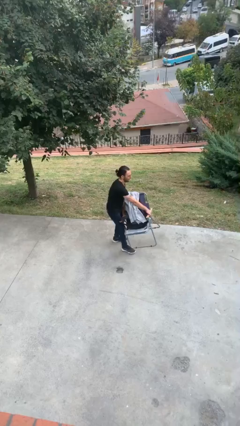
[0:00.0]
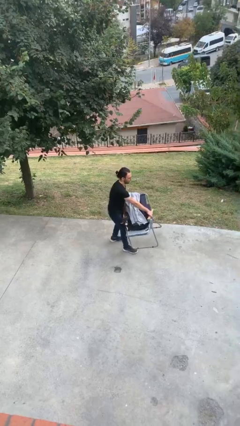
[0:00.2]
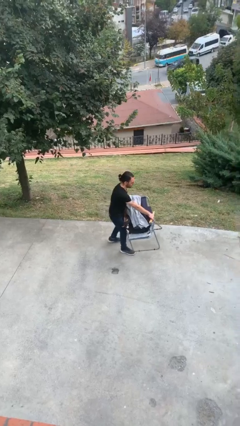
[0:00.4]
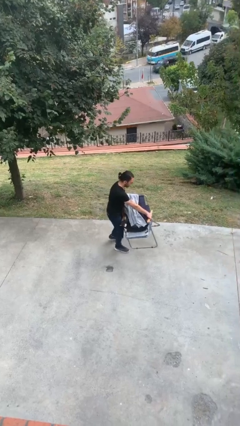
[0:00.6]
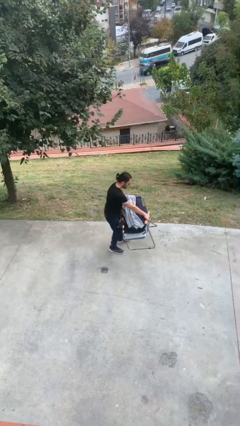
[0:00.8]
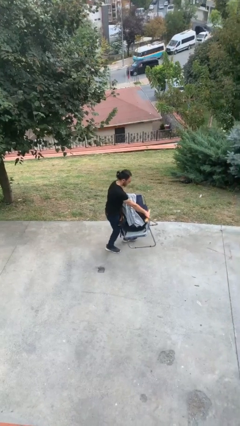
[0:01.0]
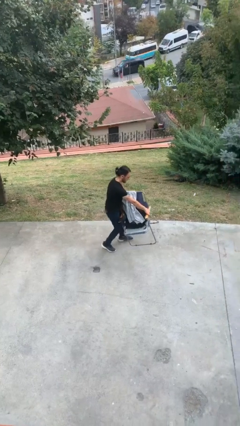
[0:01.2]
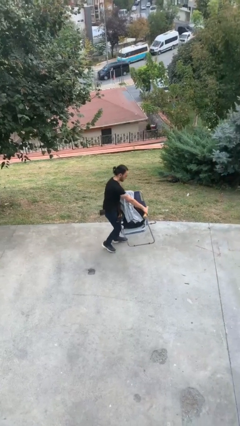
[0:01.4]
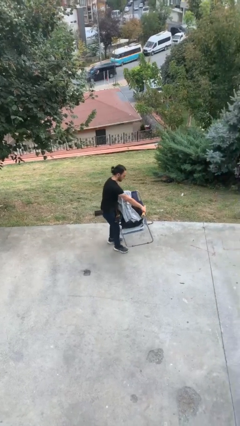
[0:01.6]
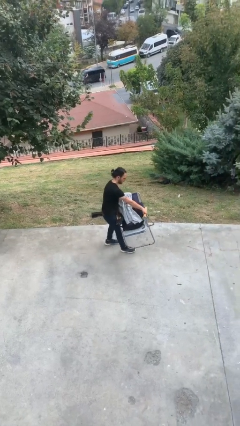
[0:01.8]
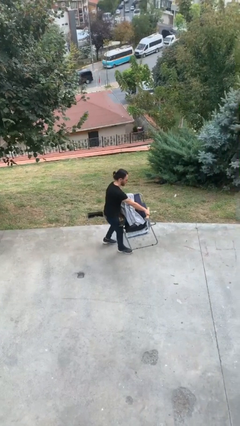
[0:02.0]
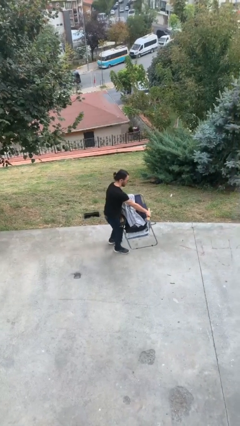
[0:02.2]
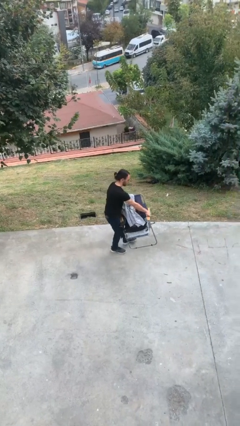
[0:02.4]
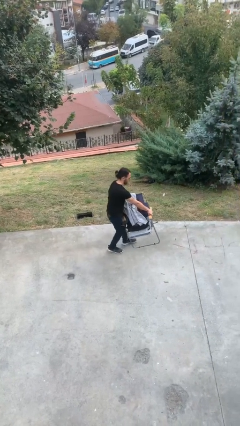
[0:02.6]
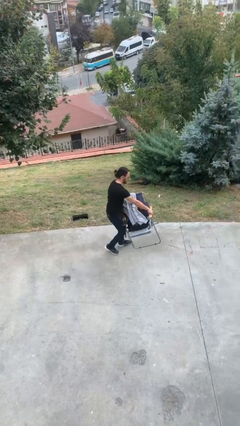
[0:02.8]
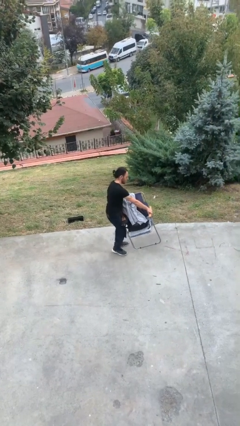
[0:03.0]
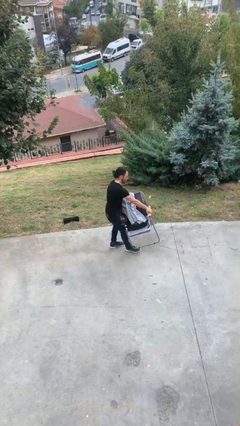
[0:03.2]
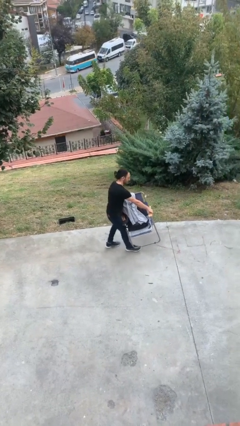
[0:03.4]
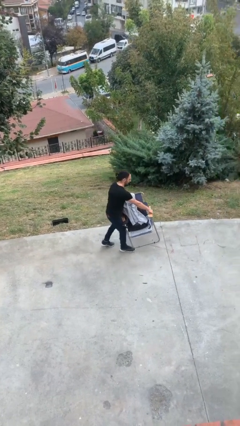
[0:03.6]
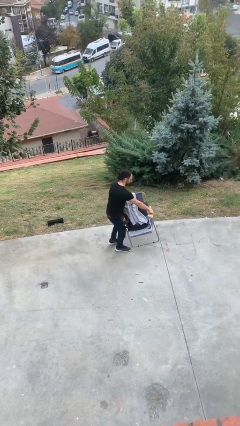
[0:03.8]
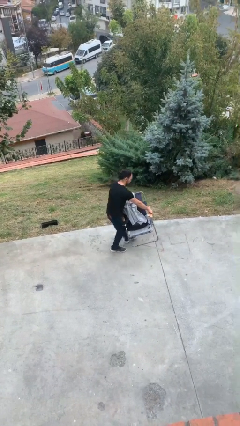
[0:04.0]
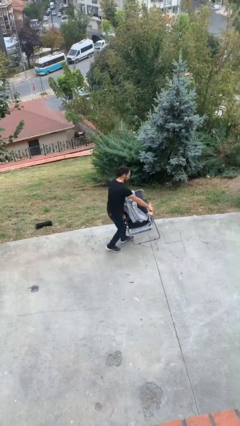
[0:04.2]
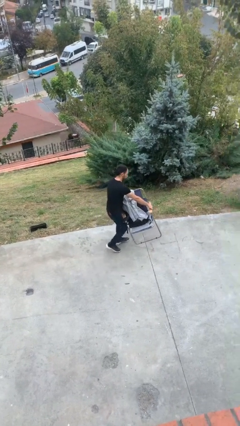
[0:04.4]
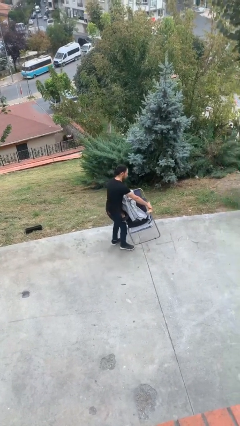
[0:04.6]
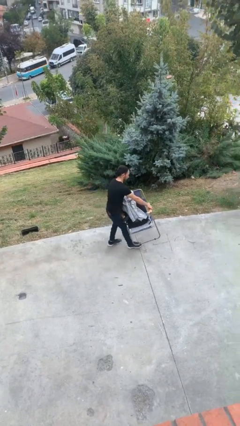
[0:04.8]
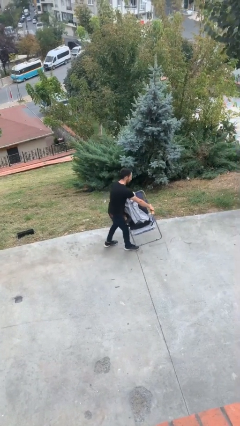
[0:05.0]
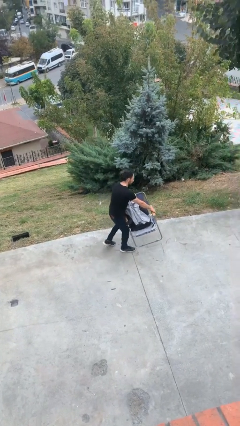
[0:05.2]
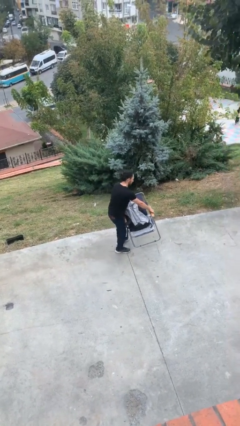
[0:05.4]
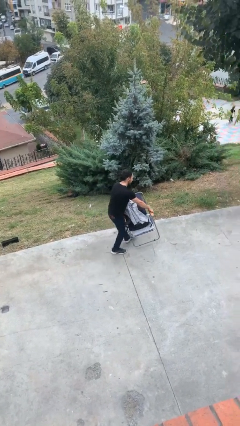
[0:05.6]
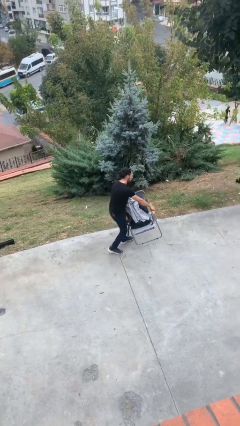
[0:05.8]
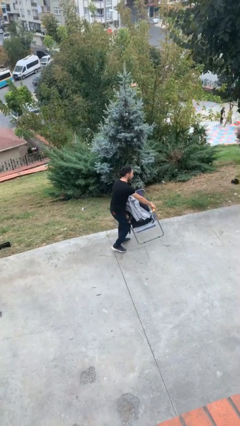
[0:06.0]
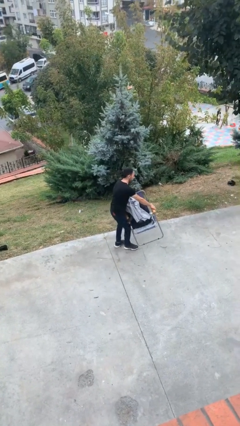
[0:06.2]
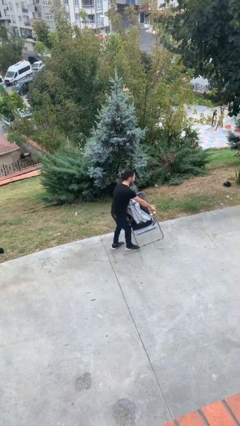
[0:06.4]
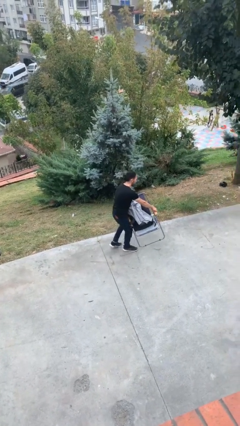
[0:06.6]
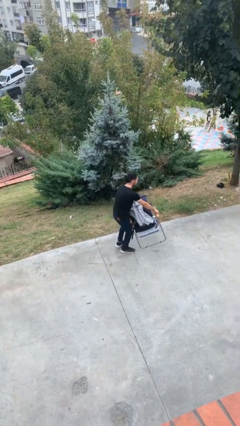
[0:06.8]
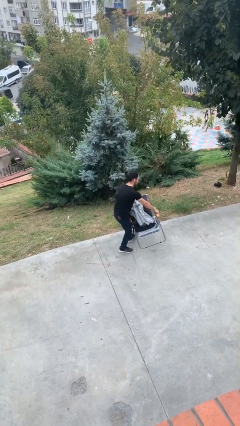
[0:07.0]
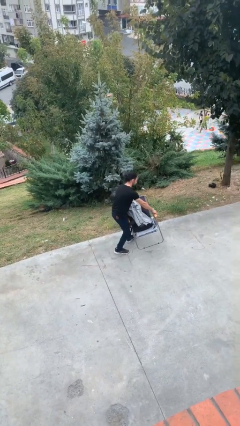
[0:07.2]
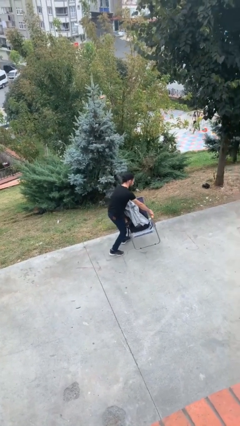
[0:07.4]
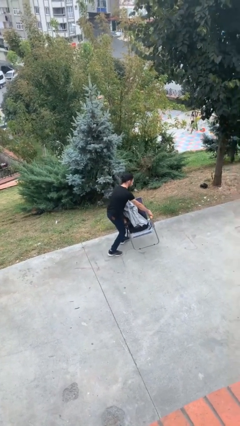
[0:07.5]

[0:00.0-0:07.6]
person carries heavy object

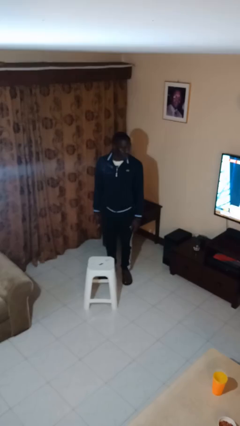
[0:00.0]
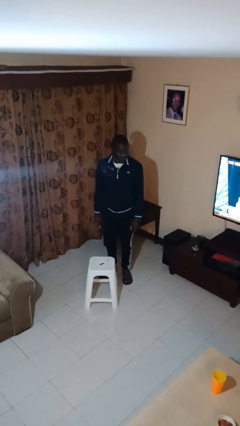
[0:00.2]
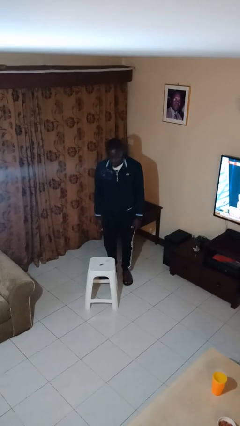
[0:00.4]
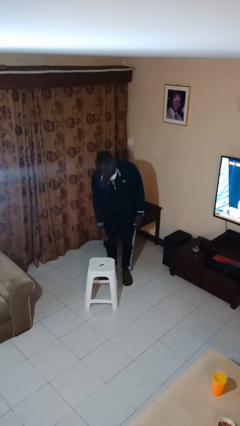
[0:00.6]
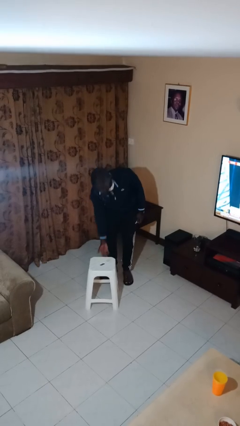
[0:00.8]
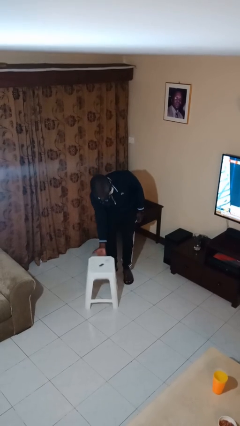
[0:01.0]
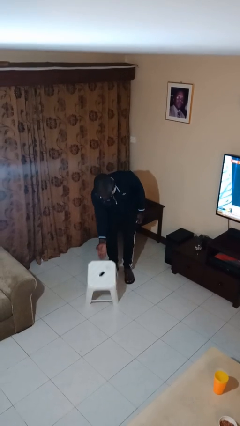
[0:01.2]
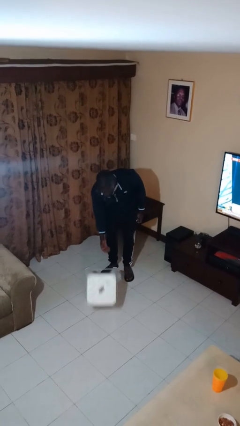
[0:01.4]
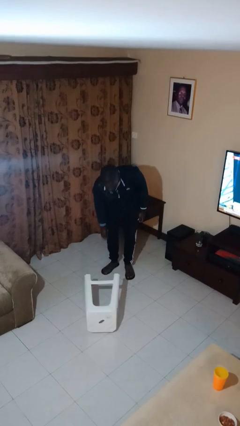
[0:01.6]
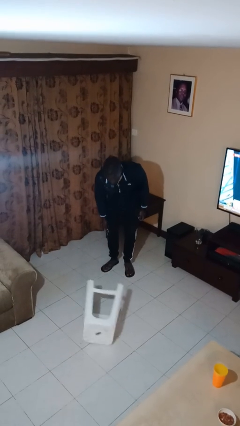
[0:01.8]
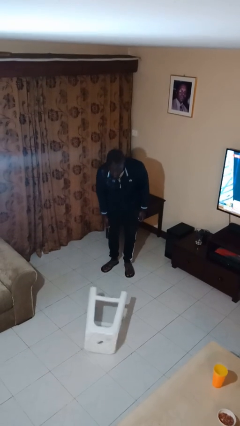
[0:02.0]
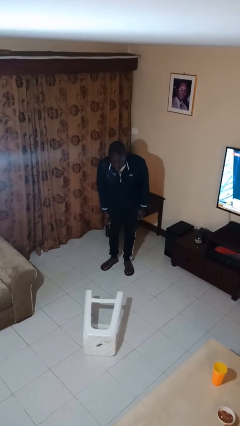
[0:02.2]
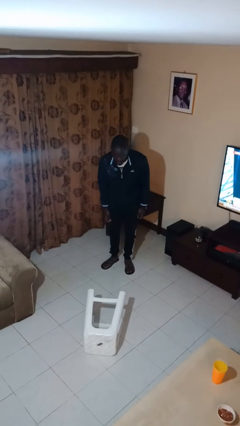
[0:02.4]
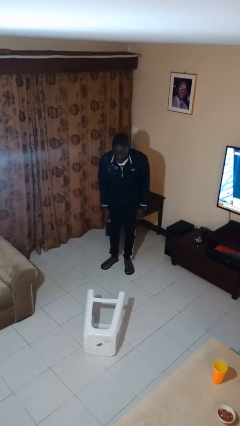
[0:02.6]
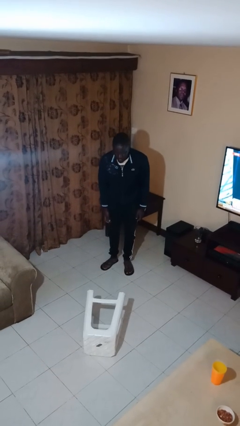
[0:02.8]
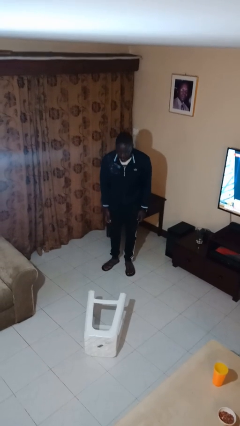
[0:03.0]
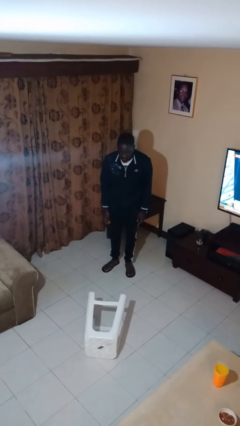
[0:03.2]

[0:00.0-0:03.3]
person knocks over furniture

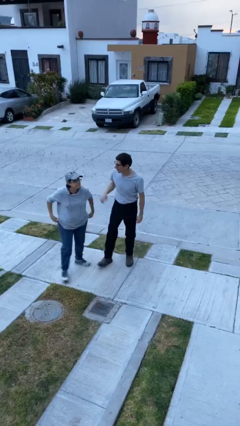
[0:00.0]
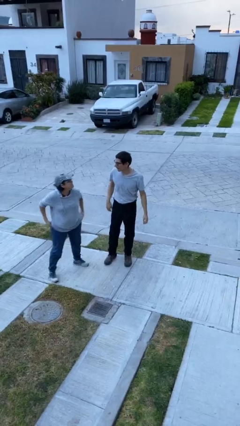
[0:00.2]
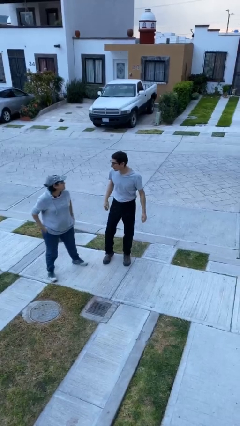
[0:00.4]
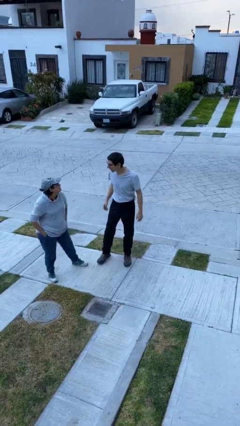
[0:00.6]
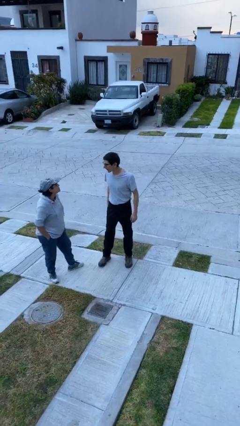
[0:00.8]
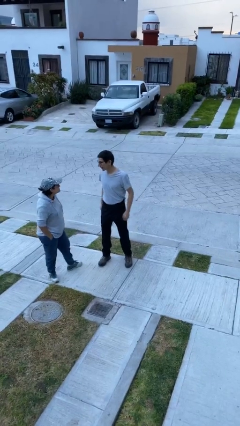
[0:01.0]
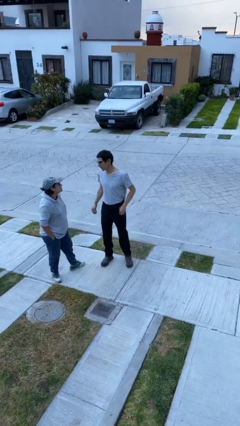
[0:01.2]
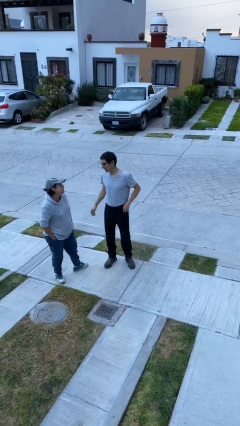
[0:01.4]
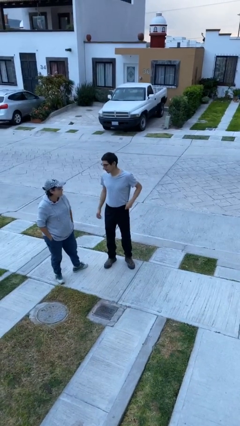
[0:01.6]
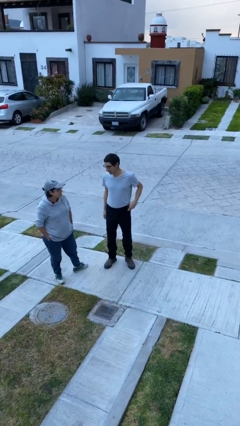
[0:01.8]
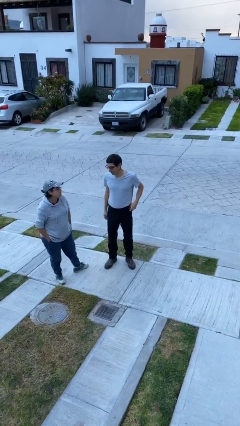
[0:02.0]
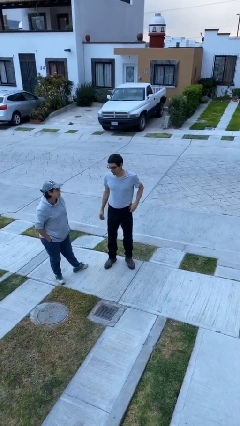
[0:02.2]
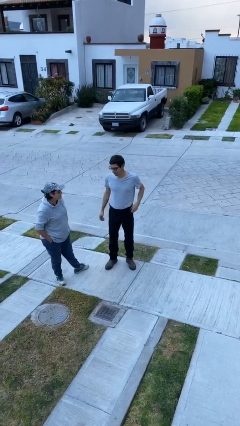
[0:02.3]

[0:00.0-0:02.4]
person talks to person

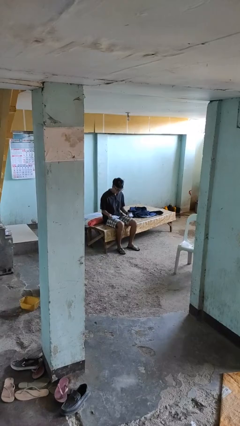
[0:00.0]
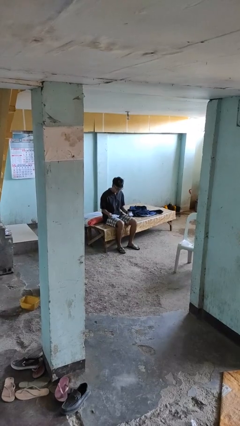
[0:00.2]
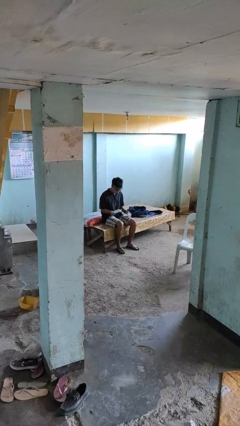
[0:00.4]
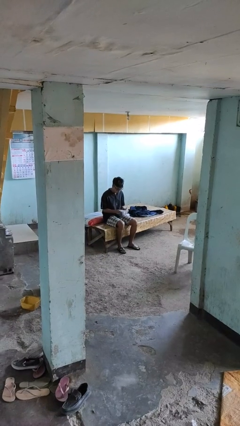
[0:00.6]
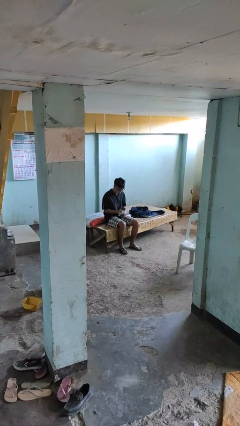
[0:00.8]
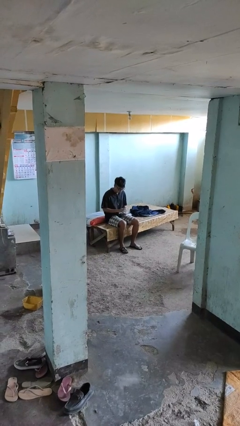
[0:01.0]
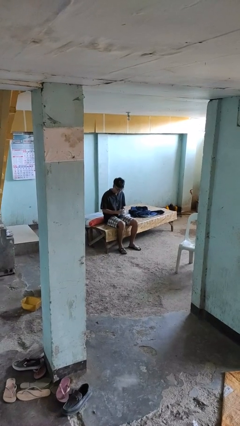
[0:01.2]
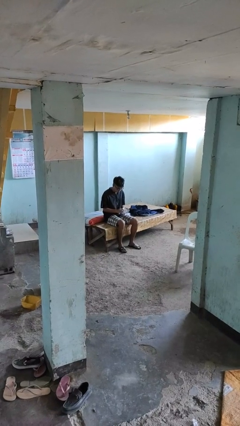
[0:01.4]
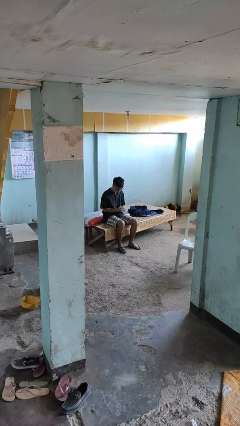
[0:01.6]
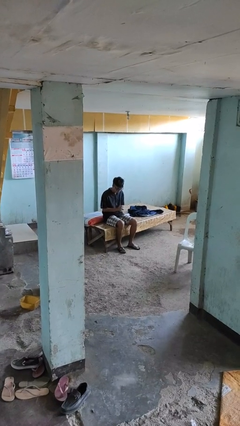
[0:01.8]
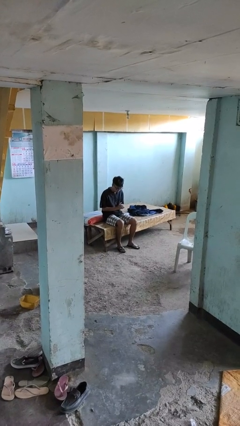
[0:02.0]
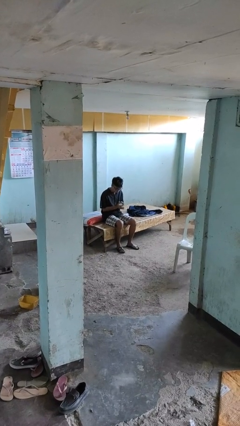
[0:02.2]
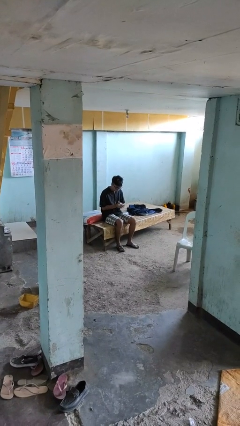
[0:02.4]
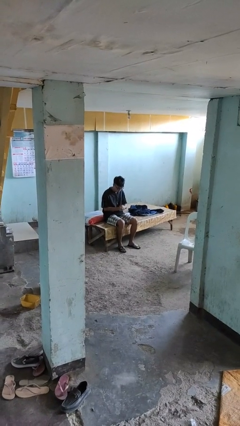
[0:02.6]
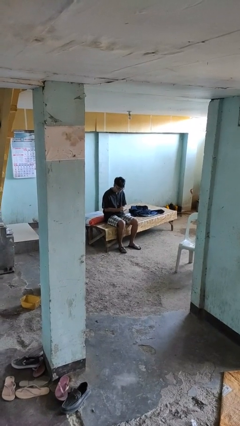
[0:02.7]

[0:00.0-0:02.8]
person crumples paper

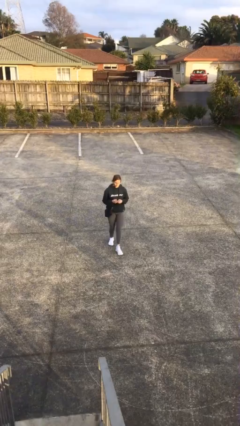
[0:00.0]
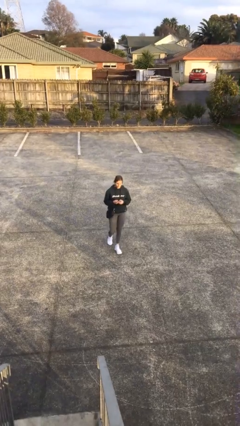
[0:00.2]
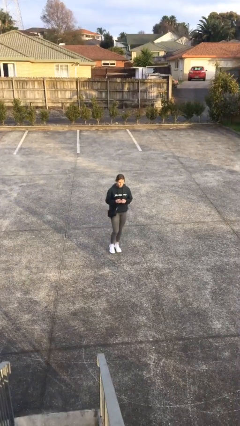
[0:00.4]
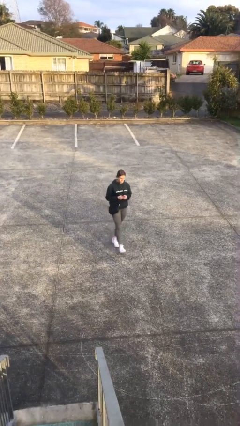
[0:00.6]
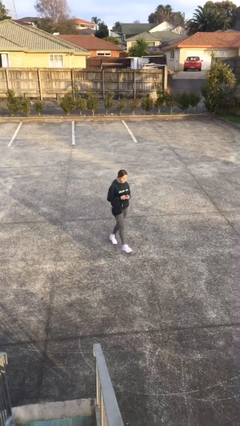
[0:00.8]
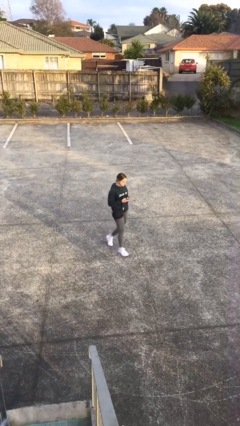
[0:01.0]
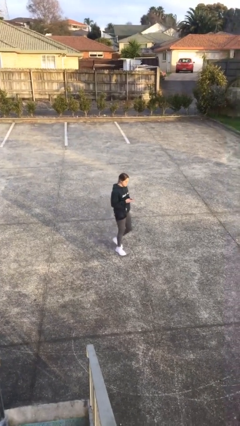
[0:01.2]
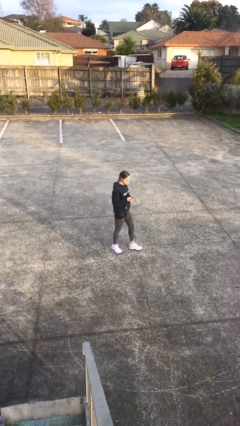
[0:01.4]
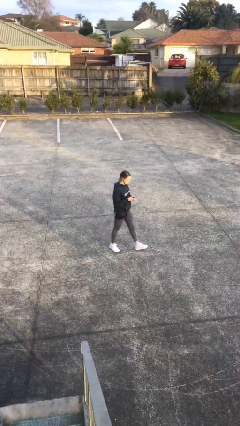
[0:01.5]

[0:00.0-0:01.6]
person texts on phone
